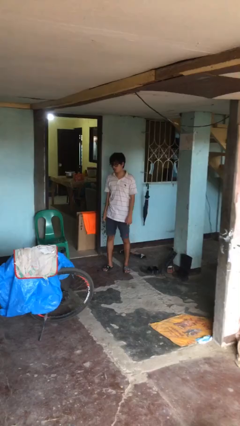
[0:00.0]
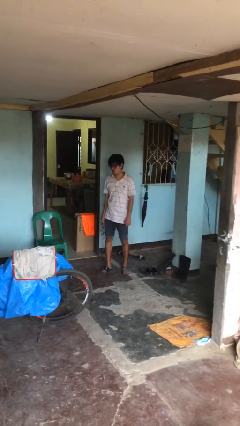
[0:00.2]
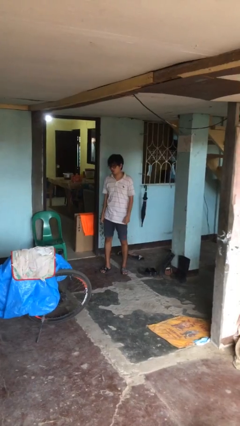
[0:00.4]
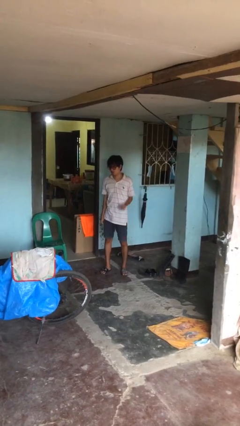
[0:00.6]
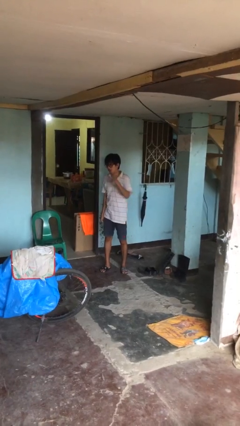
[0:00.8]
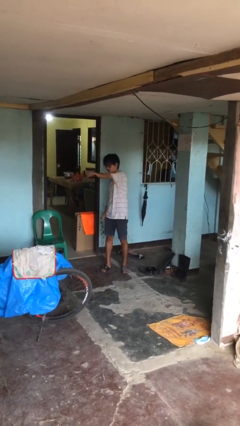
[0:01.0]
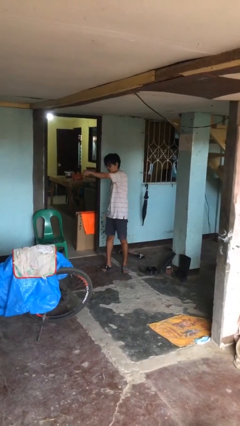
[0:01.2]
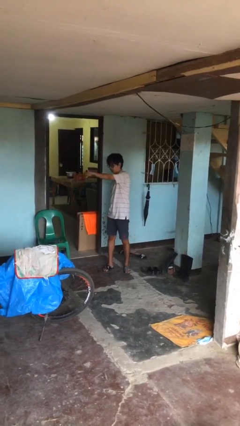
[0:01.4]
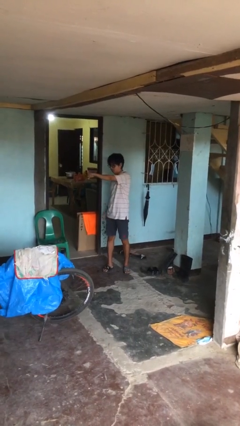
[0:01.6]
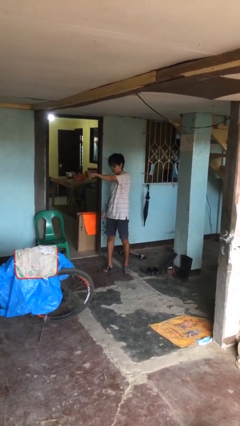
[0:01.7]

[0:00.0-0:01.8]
person punches

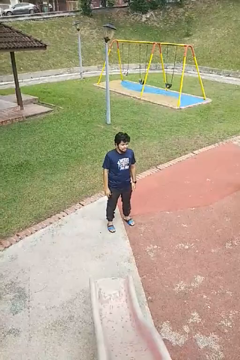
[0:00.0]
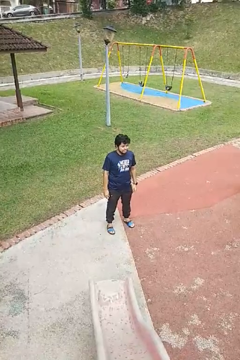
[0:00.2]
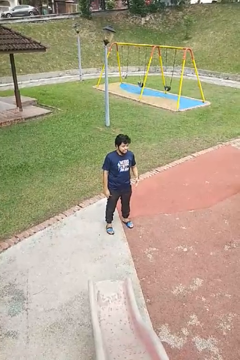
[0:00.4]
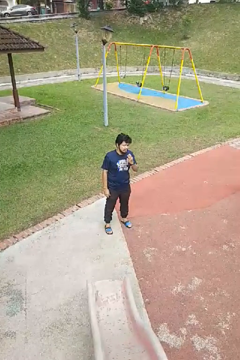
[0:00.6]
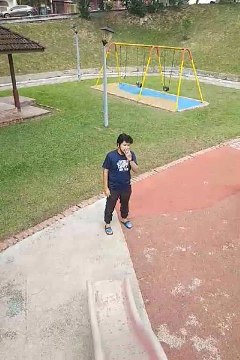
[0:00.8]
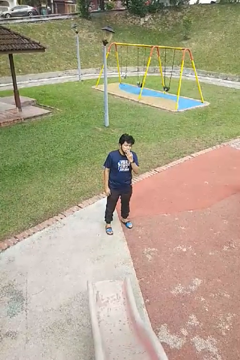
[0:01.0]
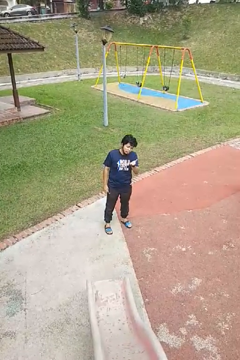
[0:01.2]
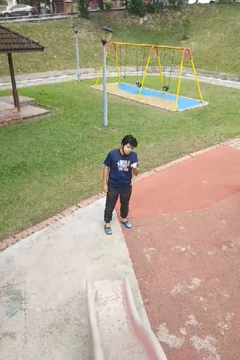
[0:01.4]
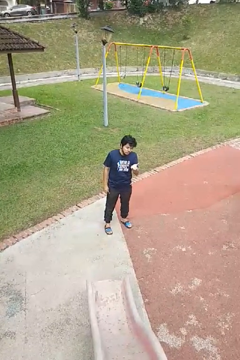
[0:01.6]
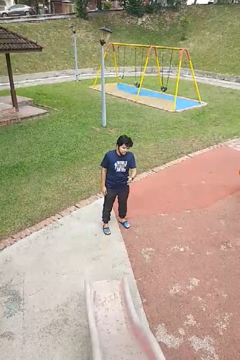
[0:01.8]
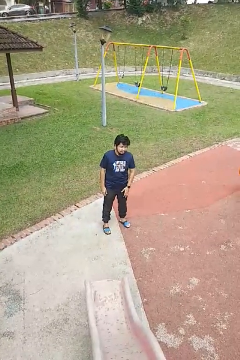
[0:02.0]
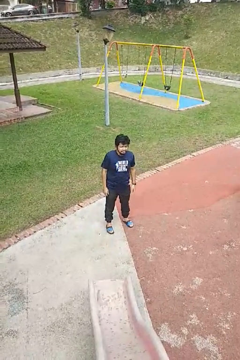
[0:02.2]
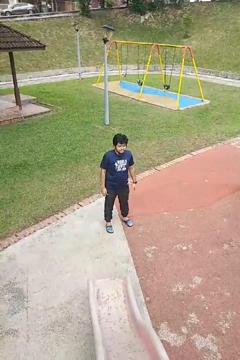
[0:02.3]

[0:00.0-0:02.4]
person gestures blow kiss

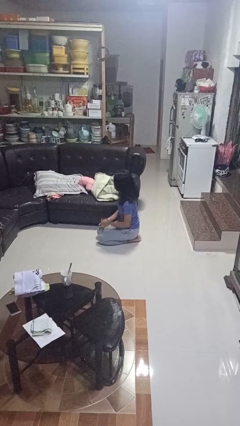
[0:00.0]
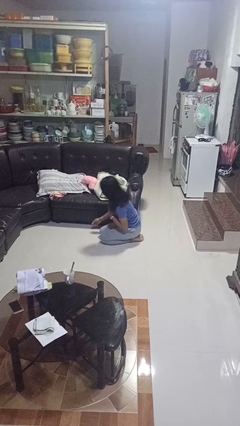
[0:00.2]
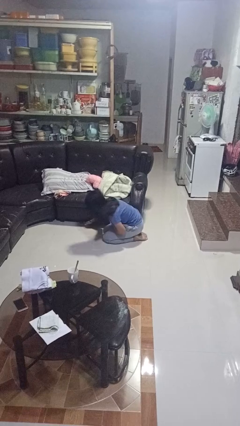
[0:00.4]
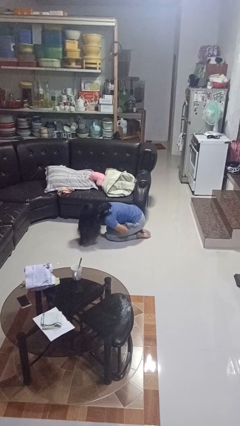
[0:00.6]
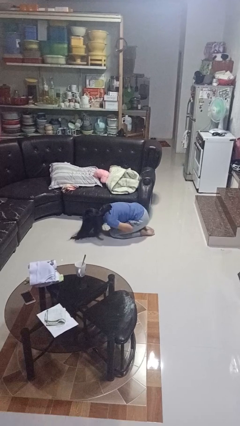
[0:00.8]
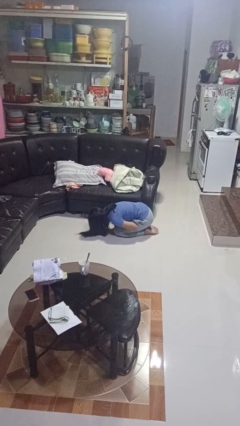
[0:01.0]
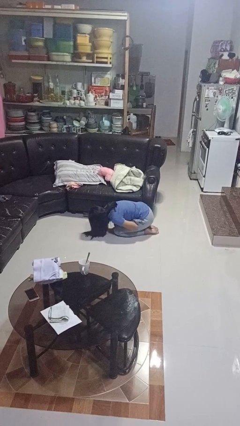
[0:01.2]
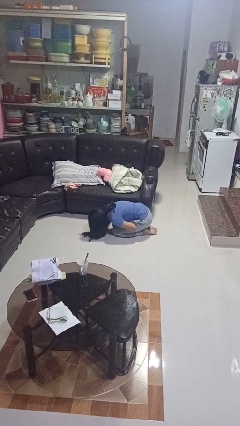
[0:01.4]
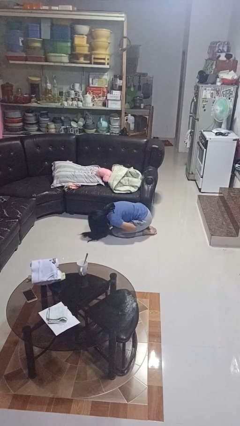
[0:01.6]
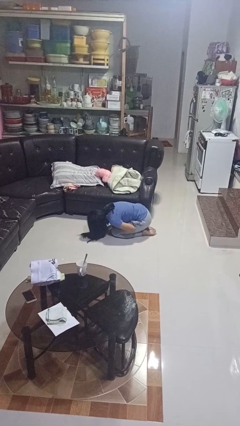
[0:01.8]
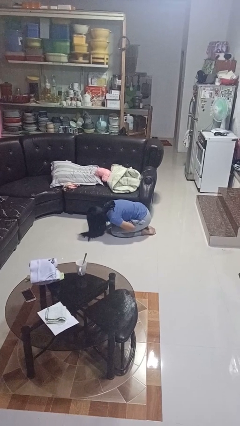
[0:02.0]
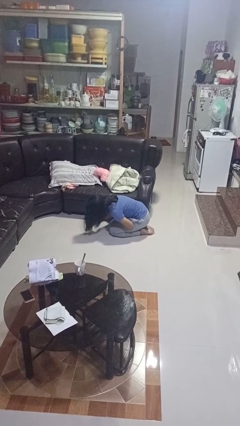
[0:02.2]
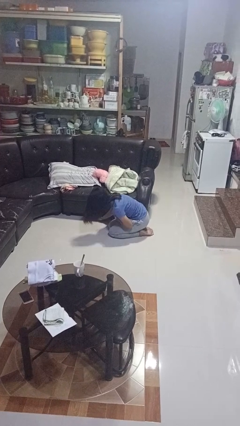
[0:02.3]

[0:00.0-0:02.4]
person searches under couch

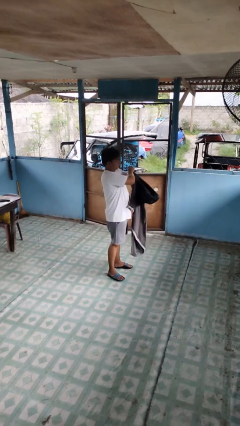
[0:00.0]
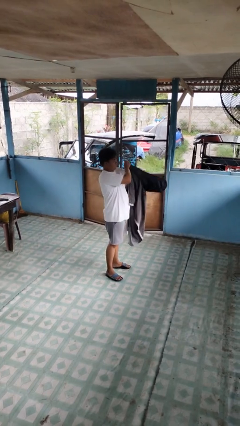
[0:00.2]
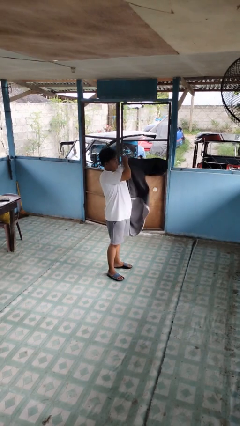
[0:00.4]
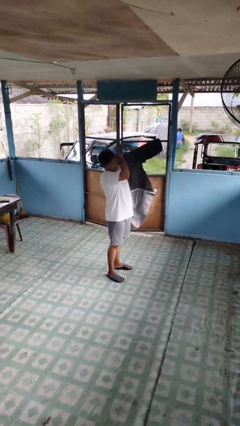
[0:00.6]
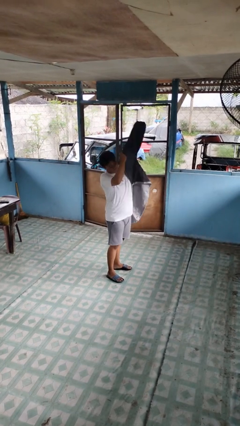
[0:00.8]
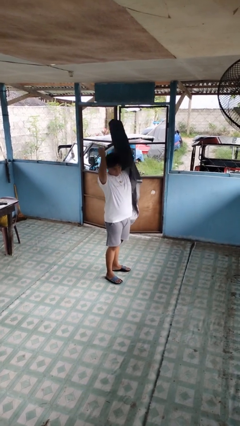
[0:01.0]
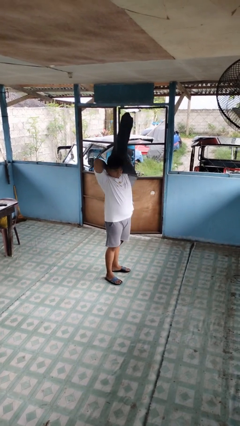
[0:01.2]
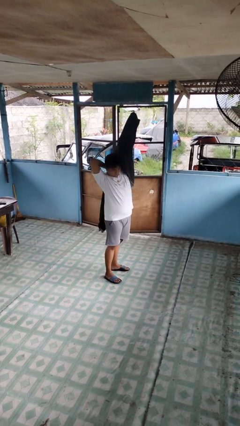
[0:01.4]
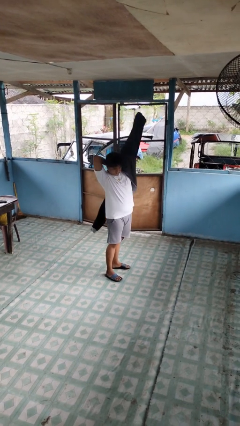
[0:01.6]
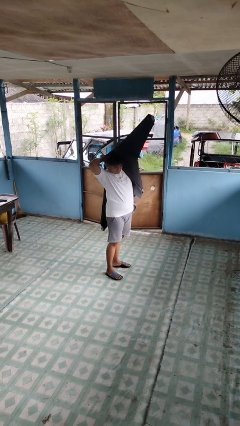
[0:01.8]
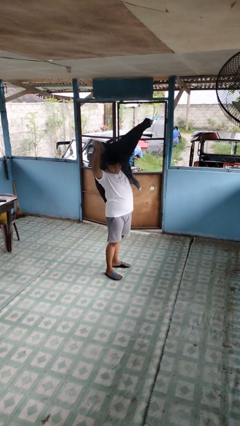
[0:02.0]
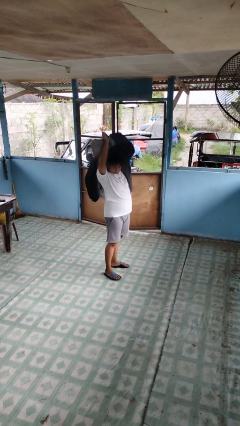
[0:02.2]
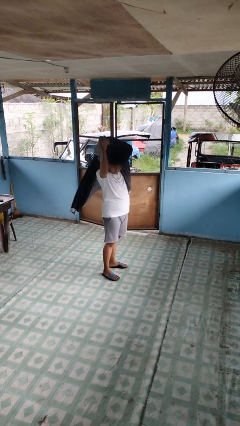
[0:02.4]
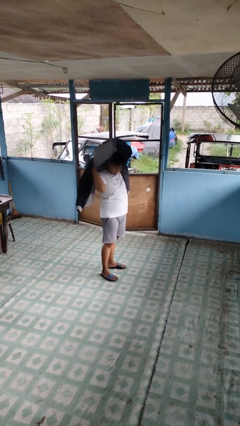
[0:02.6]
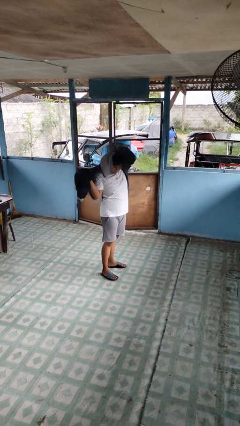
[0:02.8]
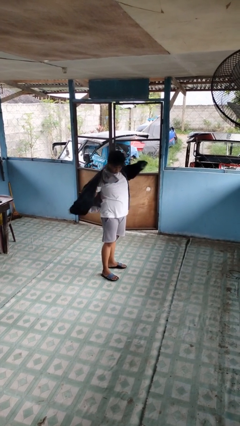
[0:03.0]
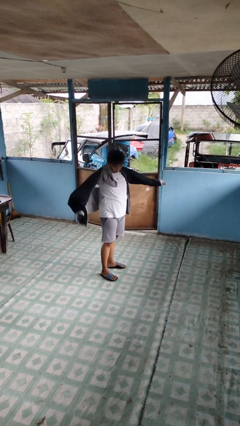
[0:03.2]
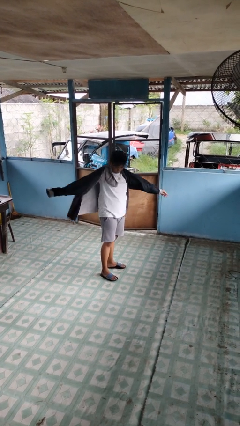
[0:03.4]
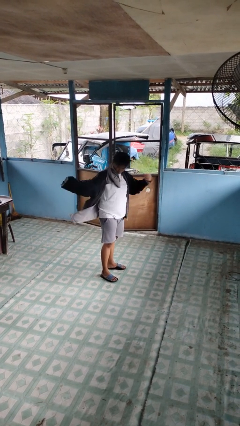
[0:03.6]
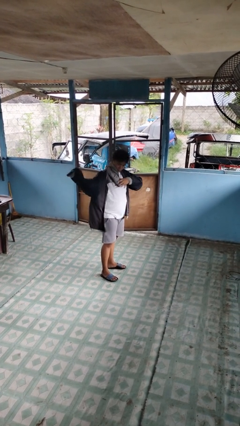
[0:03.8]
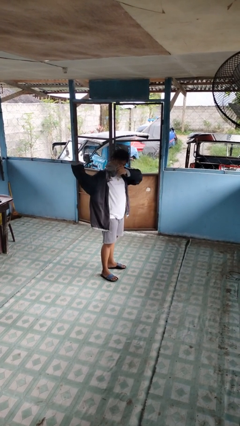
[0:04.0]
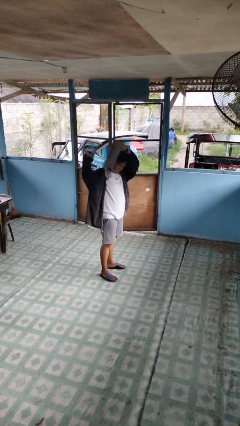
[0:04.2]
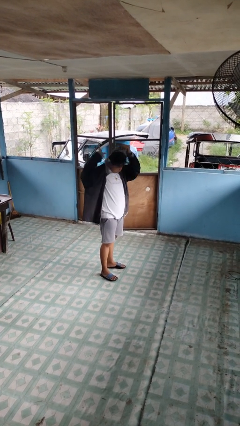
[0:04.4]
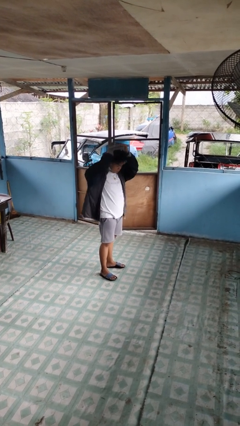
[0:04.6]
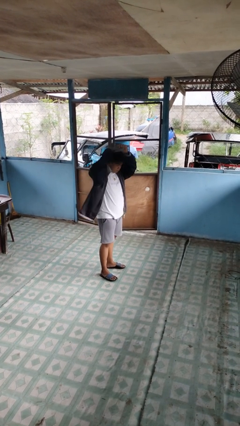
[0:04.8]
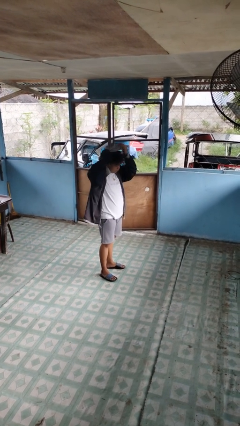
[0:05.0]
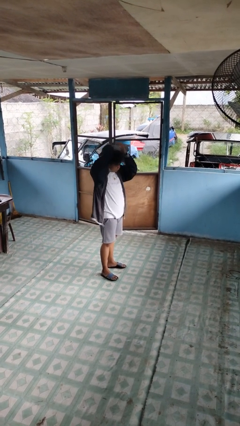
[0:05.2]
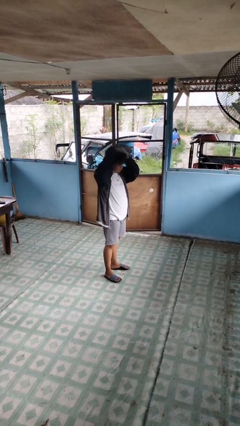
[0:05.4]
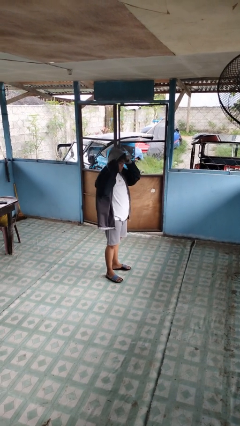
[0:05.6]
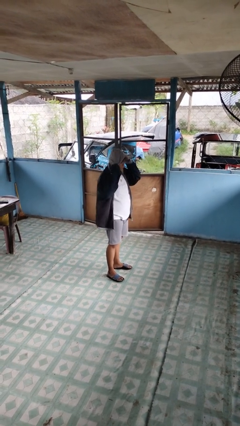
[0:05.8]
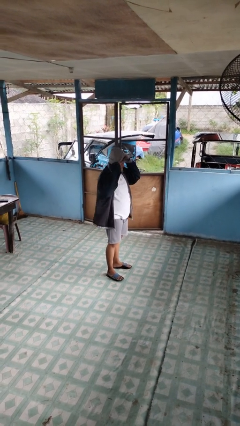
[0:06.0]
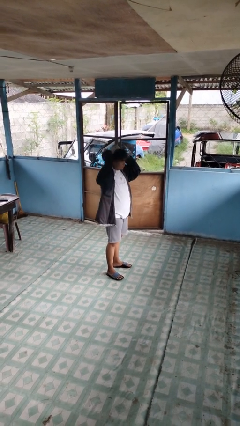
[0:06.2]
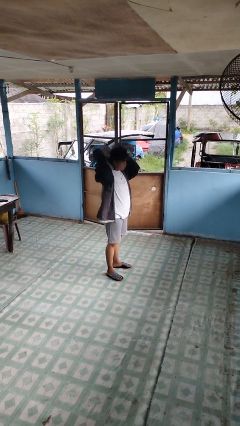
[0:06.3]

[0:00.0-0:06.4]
person puts on hoodie

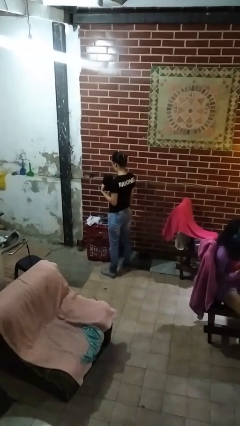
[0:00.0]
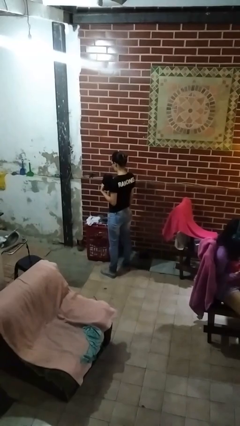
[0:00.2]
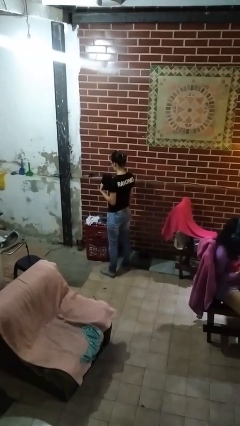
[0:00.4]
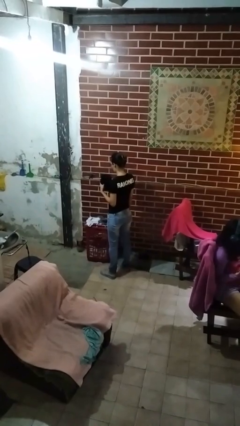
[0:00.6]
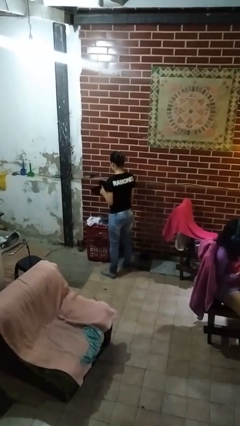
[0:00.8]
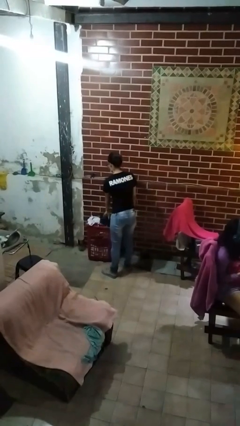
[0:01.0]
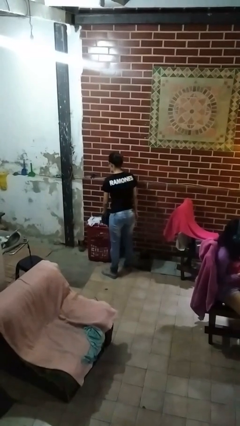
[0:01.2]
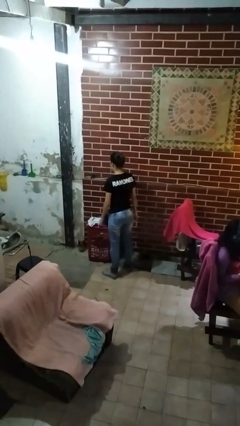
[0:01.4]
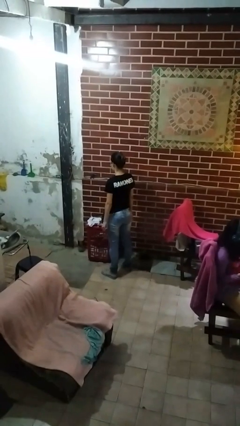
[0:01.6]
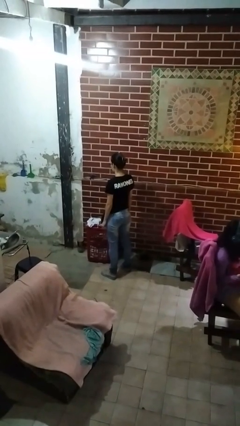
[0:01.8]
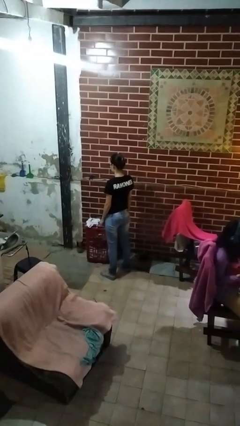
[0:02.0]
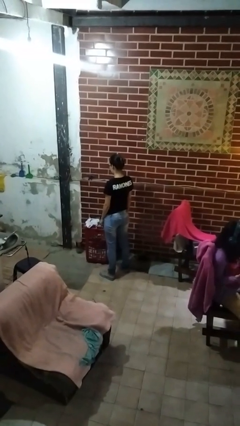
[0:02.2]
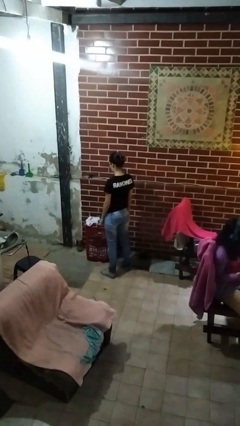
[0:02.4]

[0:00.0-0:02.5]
person puts object into basket

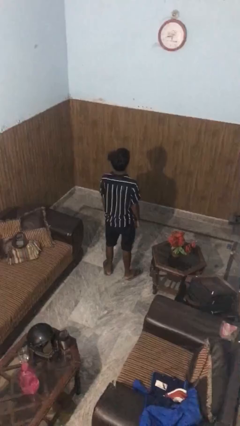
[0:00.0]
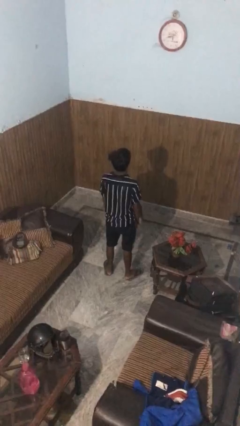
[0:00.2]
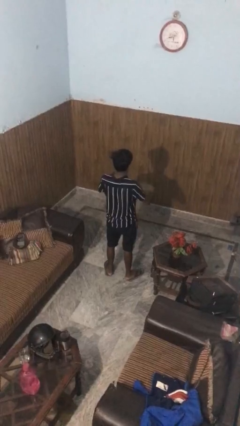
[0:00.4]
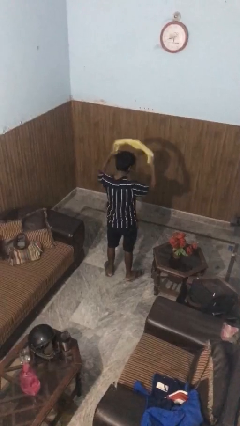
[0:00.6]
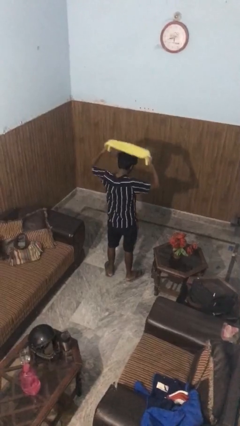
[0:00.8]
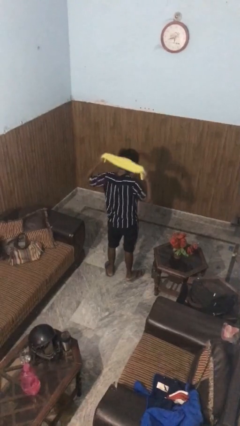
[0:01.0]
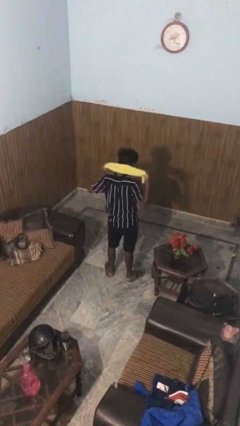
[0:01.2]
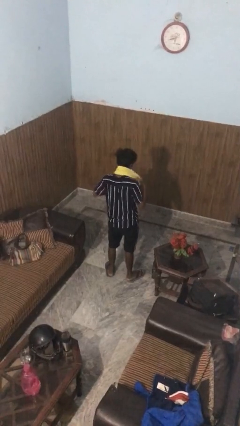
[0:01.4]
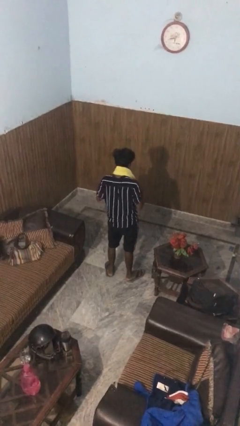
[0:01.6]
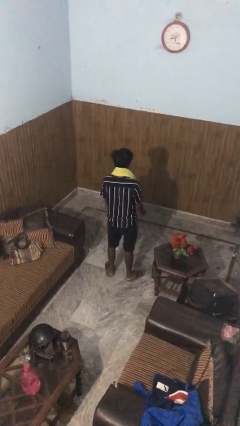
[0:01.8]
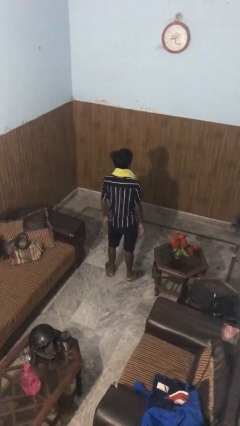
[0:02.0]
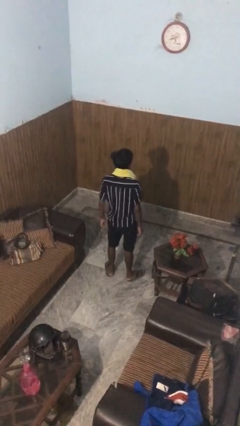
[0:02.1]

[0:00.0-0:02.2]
person puts on scarf
